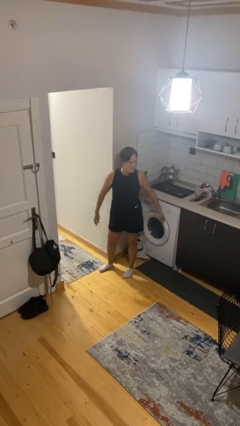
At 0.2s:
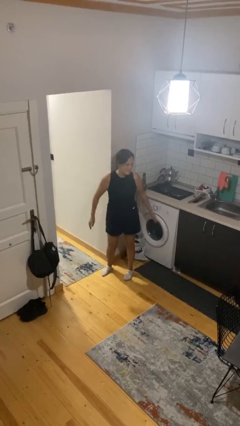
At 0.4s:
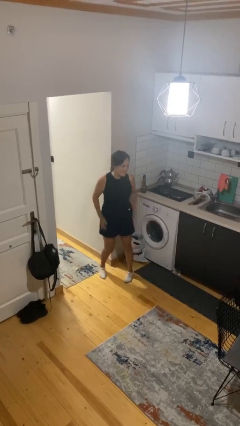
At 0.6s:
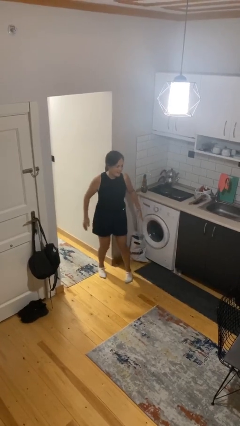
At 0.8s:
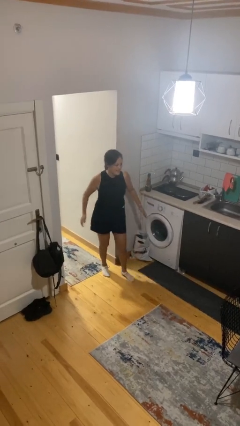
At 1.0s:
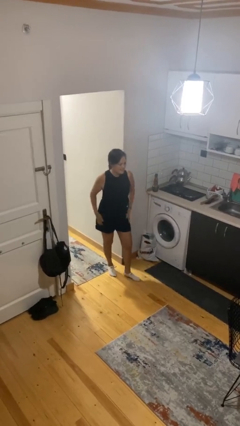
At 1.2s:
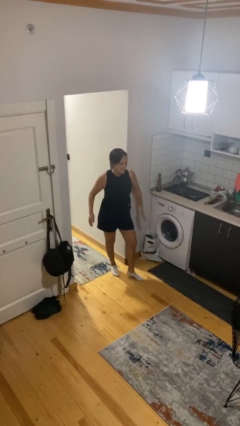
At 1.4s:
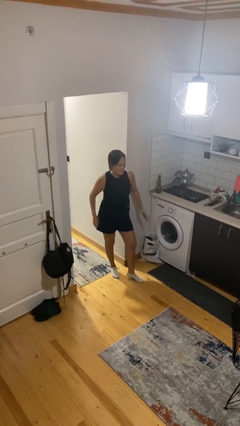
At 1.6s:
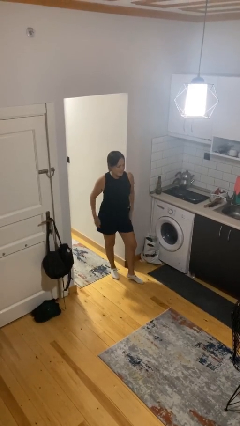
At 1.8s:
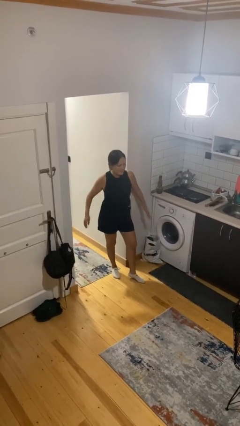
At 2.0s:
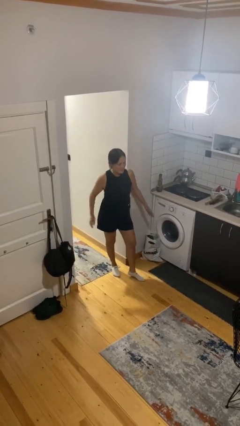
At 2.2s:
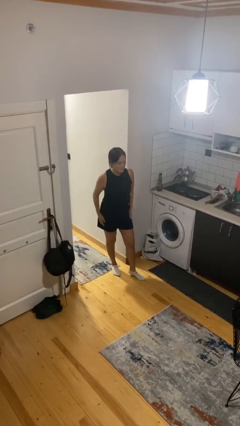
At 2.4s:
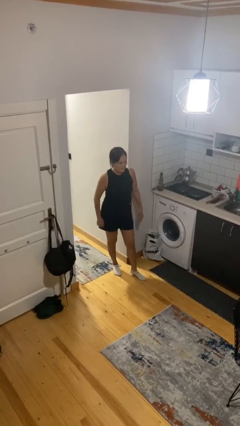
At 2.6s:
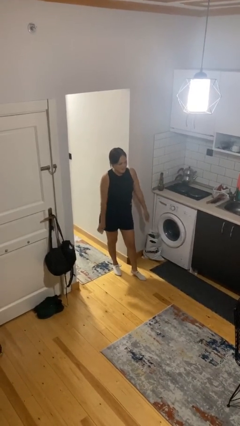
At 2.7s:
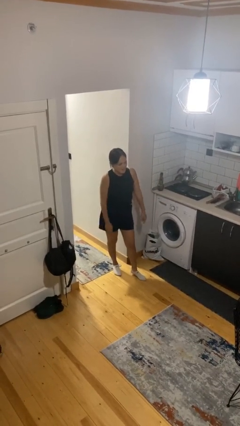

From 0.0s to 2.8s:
person slaps hands on thighs

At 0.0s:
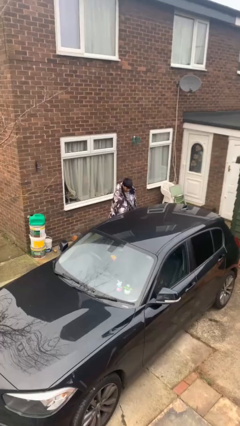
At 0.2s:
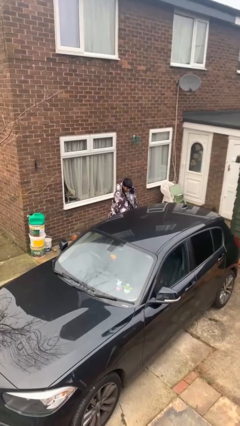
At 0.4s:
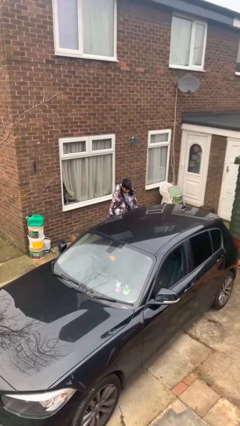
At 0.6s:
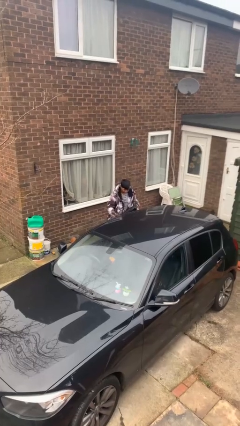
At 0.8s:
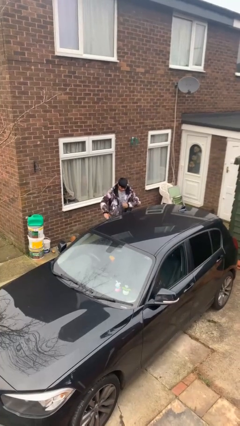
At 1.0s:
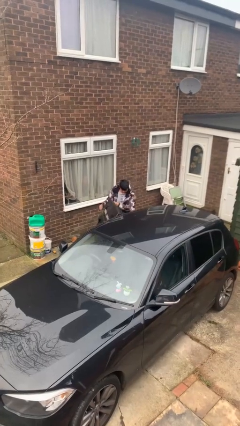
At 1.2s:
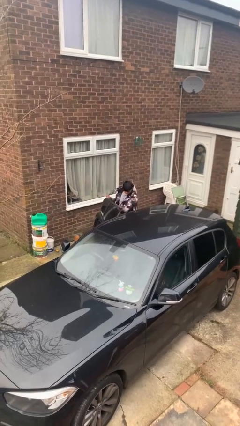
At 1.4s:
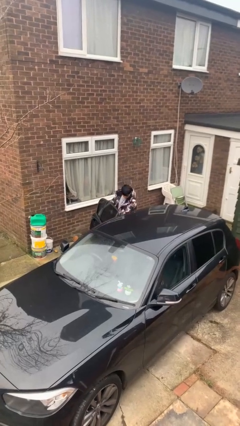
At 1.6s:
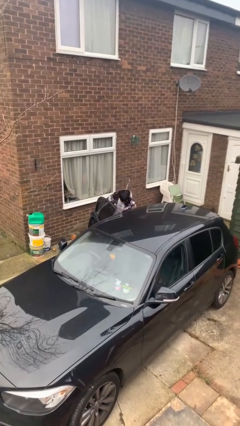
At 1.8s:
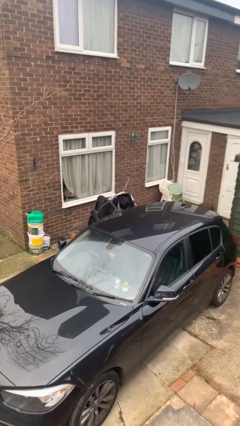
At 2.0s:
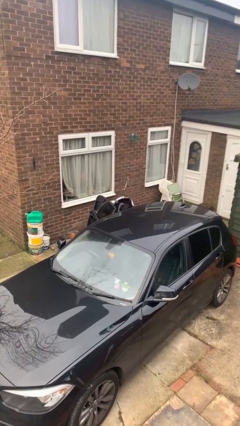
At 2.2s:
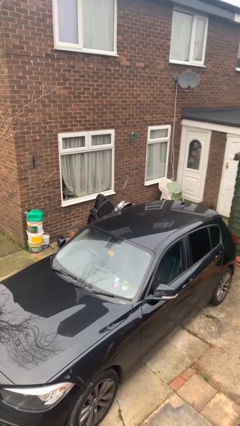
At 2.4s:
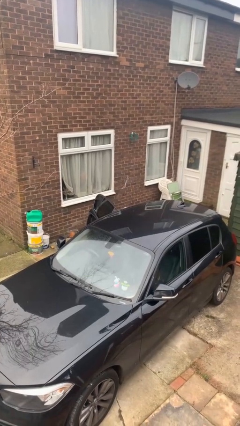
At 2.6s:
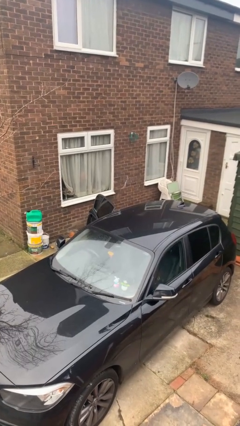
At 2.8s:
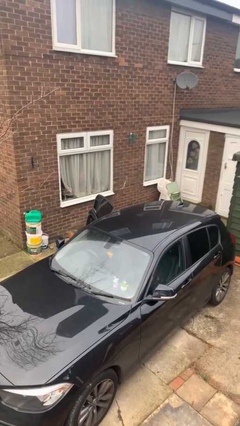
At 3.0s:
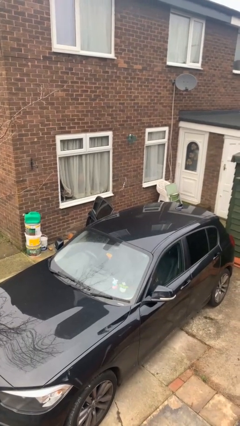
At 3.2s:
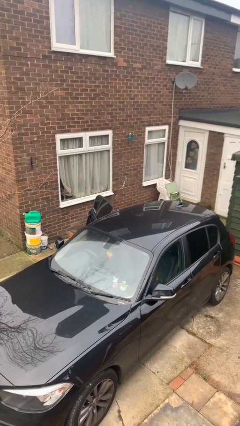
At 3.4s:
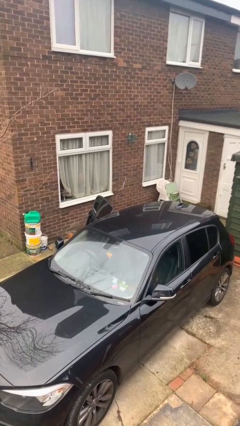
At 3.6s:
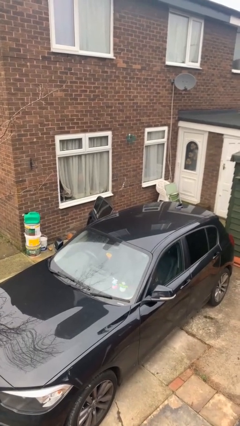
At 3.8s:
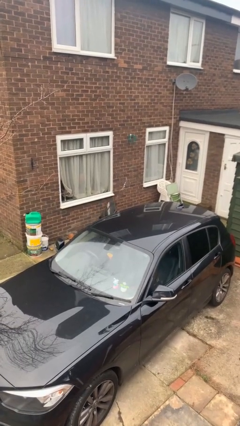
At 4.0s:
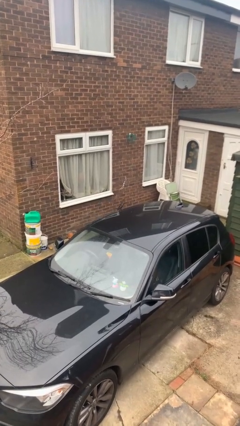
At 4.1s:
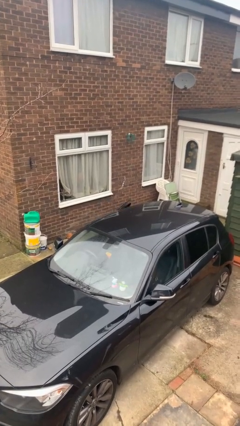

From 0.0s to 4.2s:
car picks up person

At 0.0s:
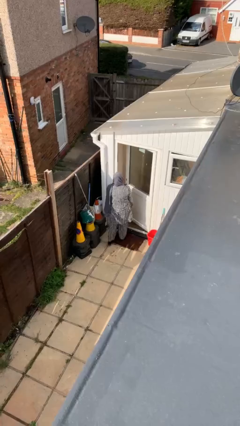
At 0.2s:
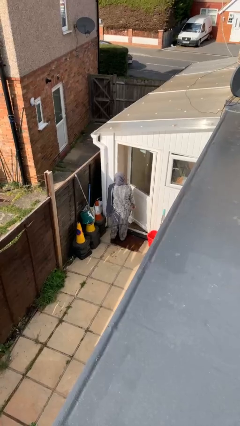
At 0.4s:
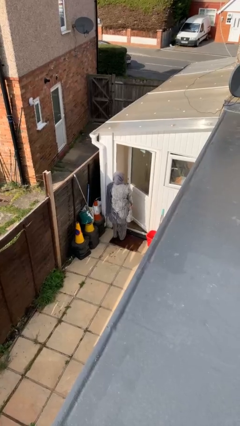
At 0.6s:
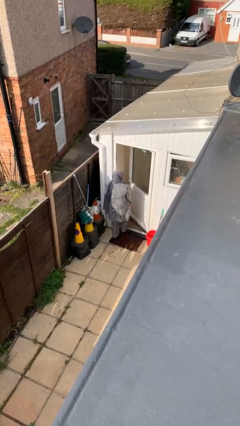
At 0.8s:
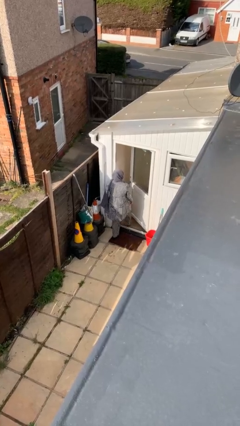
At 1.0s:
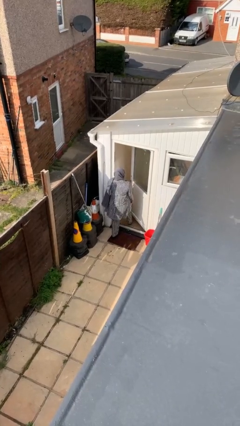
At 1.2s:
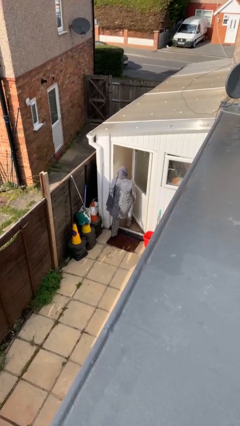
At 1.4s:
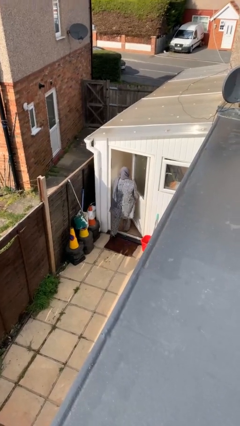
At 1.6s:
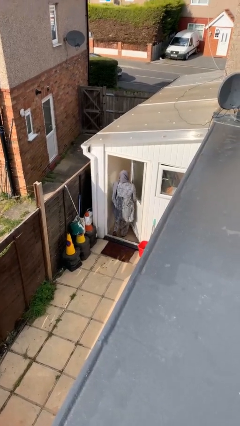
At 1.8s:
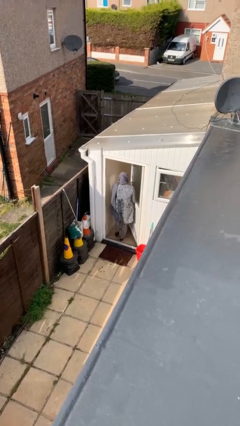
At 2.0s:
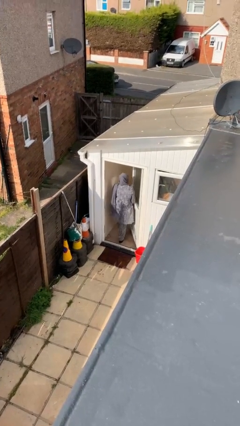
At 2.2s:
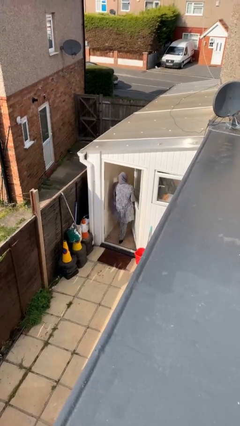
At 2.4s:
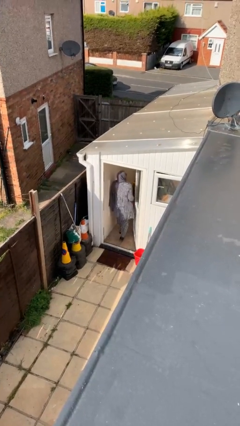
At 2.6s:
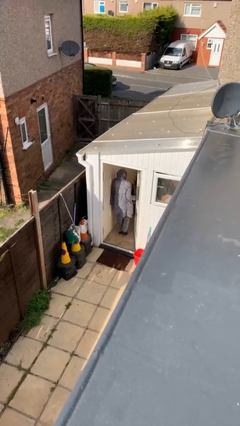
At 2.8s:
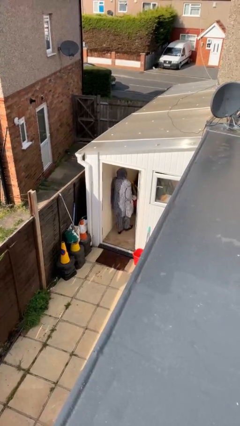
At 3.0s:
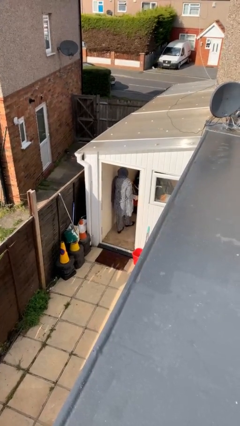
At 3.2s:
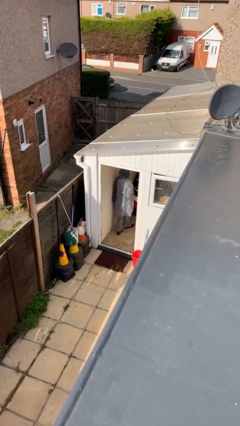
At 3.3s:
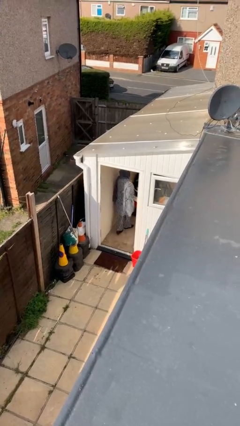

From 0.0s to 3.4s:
person exits scene through structure

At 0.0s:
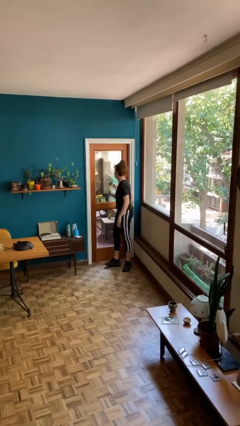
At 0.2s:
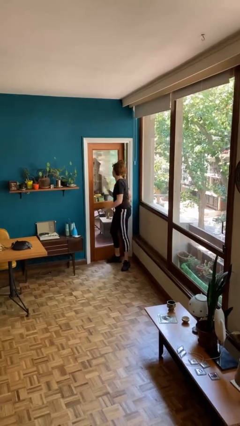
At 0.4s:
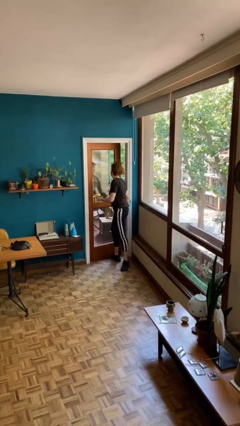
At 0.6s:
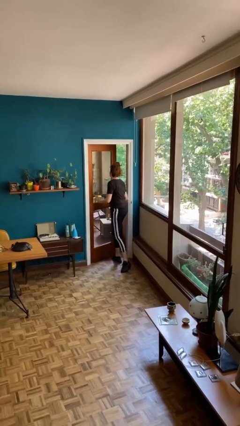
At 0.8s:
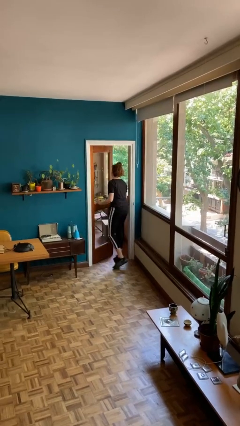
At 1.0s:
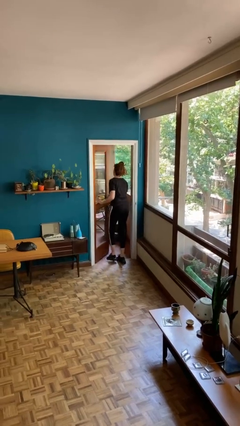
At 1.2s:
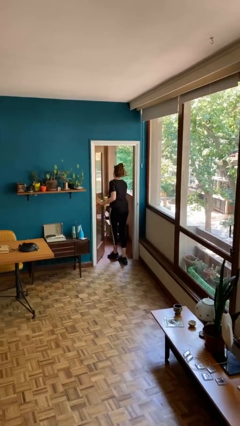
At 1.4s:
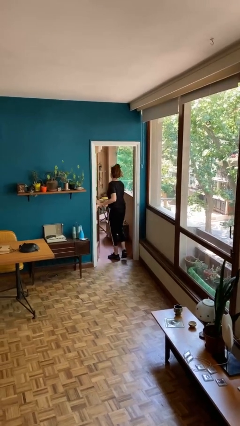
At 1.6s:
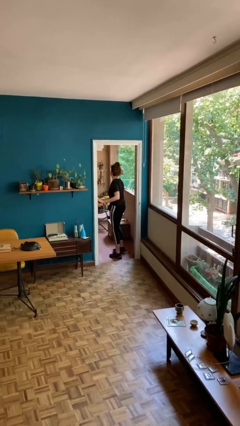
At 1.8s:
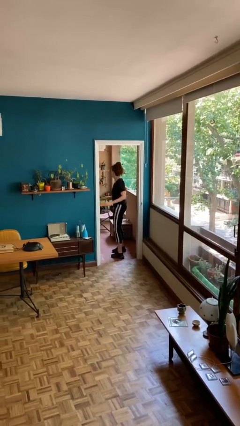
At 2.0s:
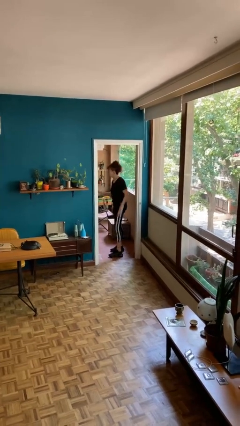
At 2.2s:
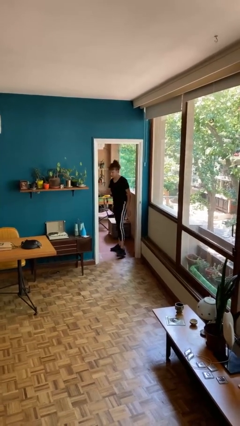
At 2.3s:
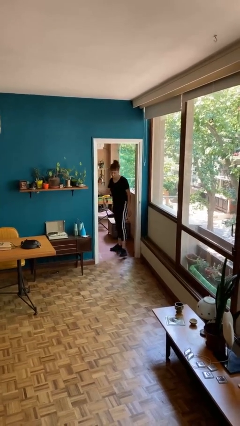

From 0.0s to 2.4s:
person opens facility door

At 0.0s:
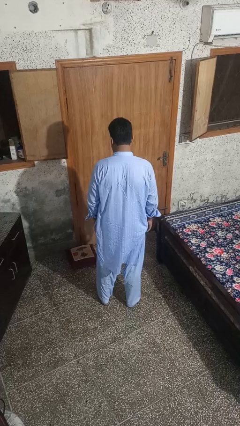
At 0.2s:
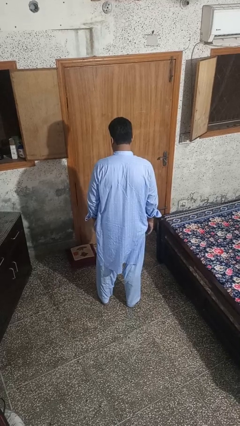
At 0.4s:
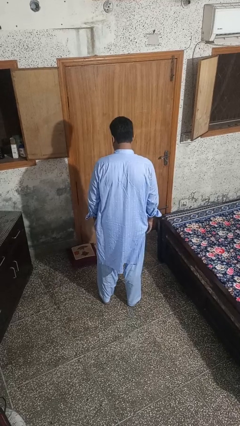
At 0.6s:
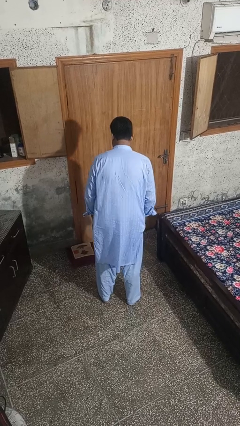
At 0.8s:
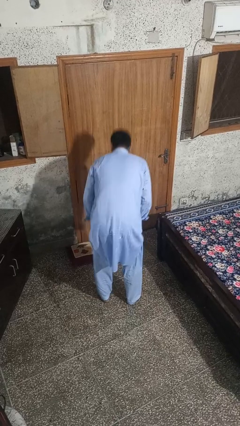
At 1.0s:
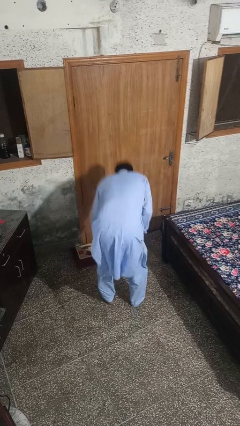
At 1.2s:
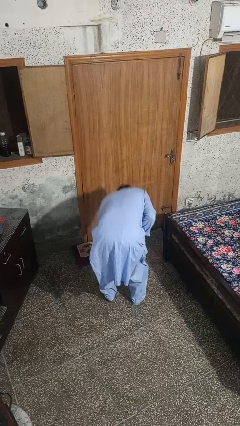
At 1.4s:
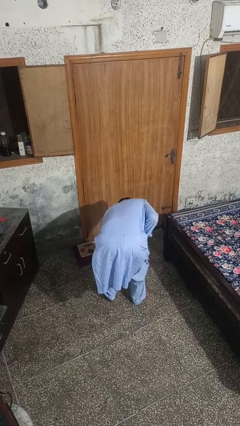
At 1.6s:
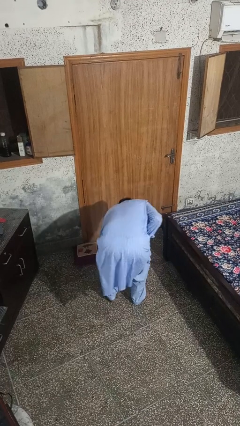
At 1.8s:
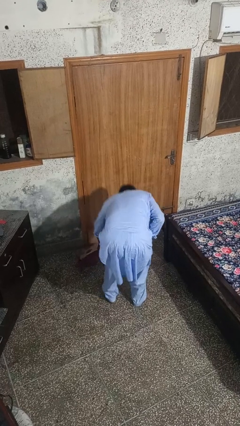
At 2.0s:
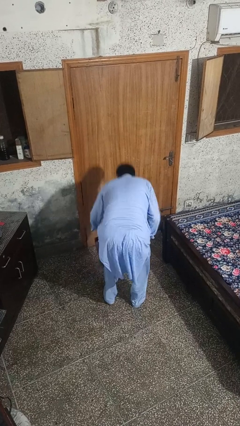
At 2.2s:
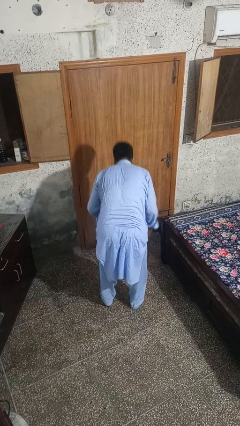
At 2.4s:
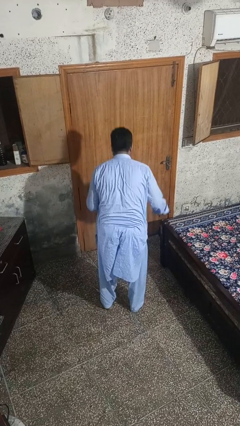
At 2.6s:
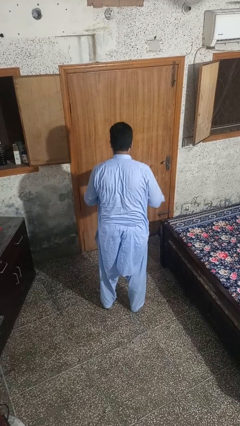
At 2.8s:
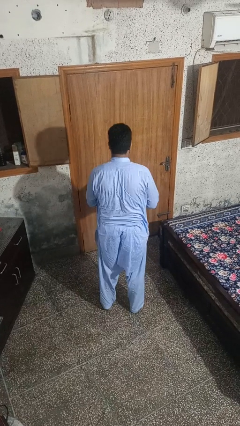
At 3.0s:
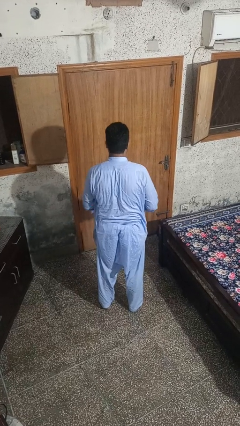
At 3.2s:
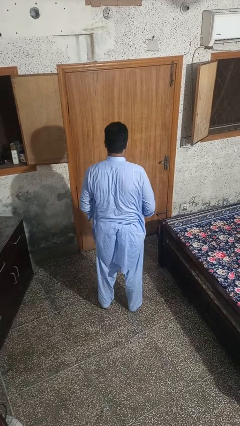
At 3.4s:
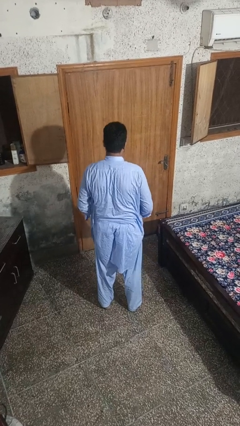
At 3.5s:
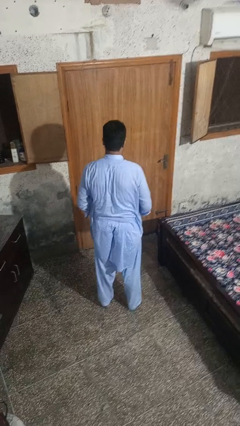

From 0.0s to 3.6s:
person picks up object from floor

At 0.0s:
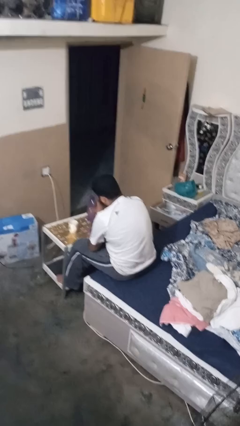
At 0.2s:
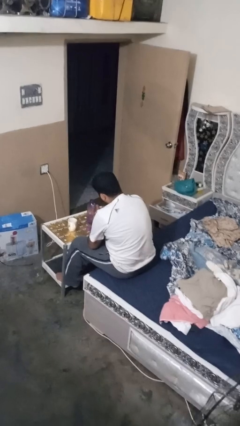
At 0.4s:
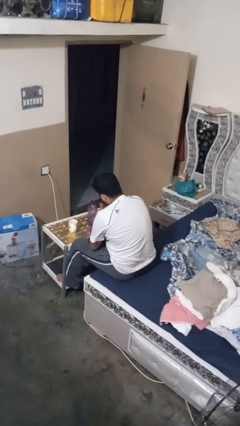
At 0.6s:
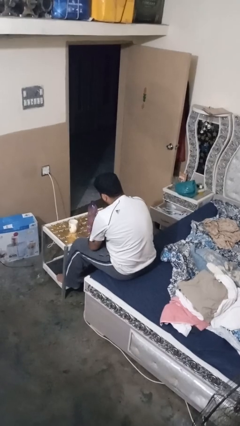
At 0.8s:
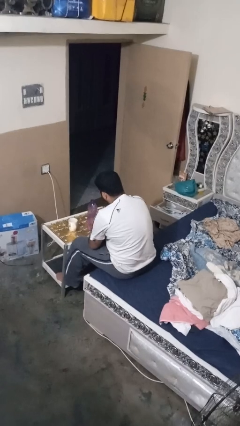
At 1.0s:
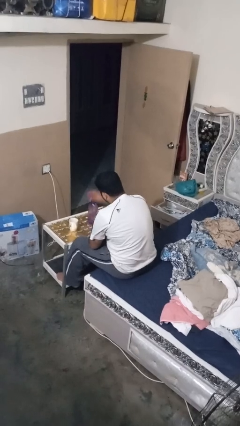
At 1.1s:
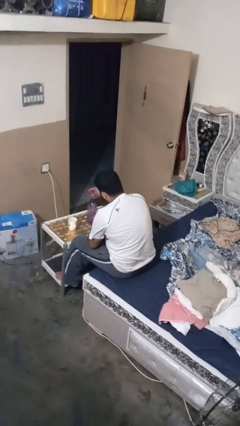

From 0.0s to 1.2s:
person screws lid to bottle
